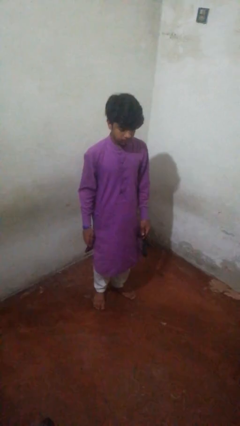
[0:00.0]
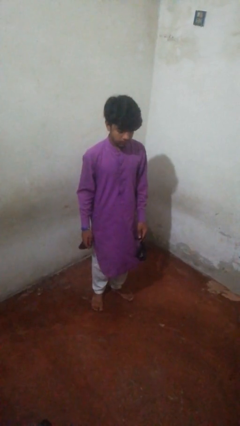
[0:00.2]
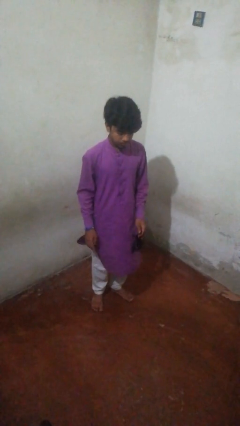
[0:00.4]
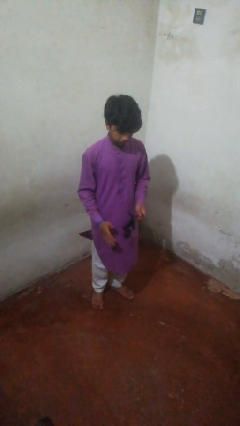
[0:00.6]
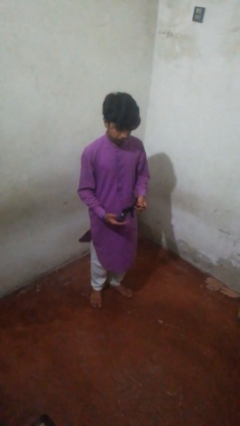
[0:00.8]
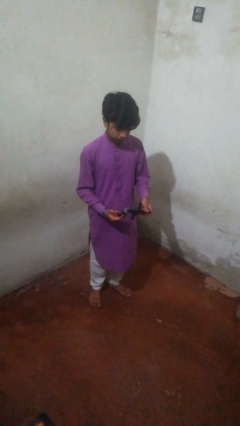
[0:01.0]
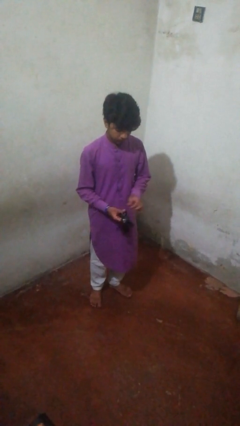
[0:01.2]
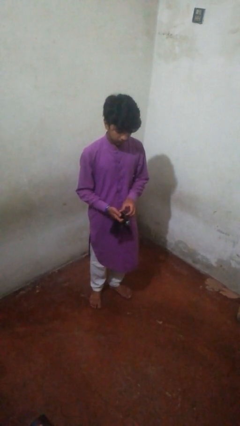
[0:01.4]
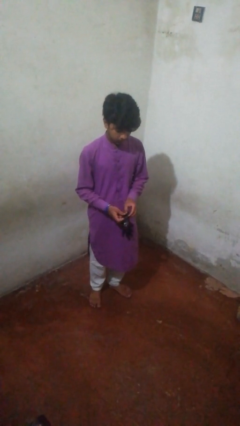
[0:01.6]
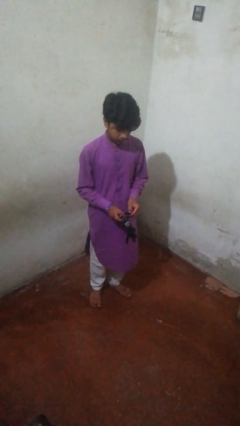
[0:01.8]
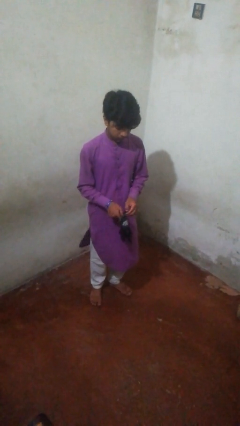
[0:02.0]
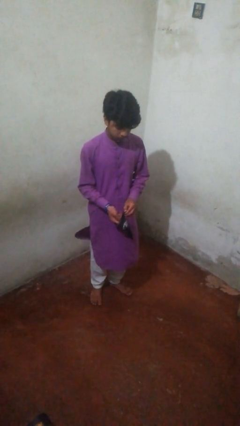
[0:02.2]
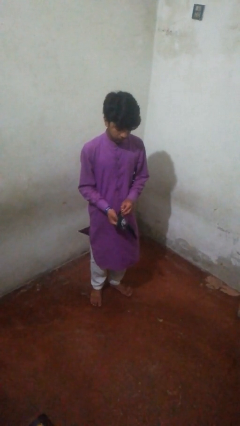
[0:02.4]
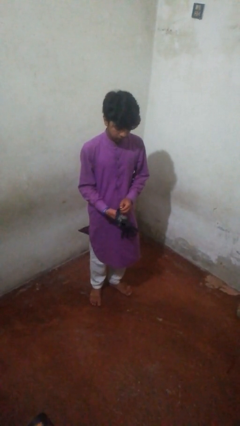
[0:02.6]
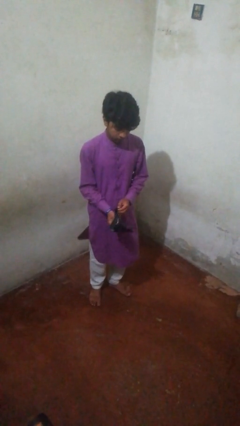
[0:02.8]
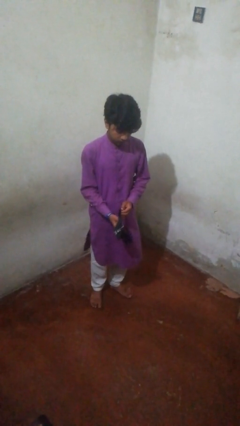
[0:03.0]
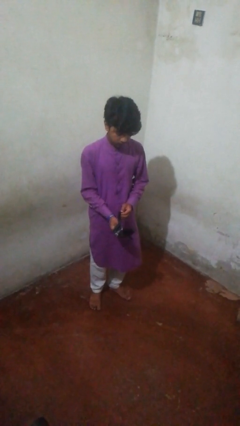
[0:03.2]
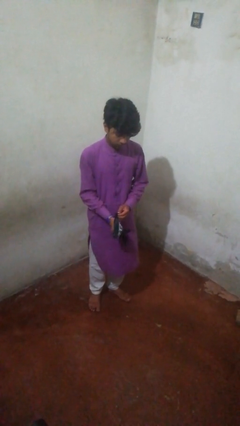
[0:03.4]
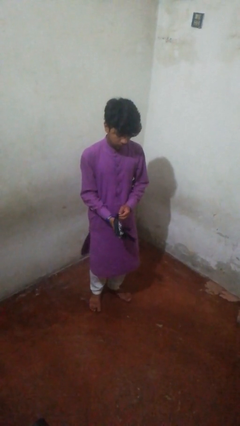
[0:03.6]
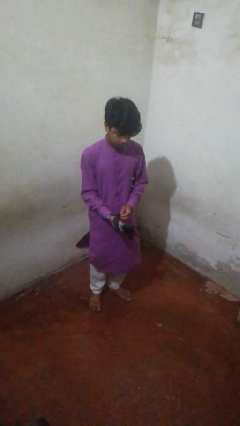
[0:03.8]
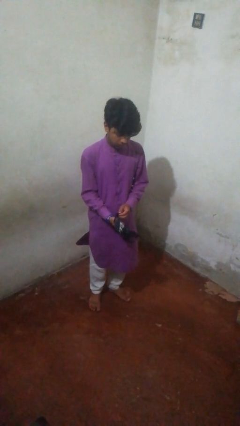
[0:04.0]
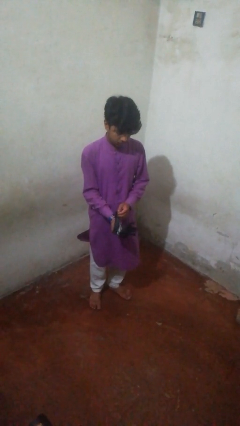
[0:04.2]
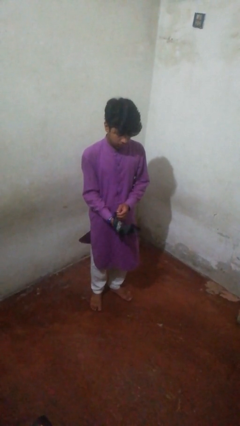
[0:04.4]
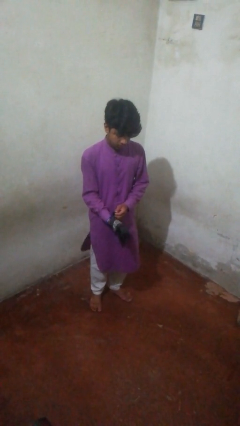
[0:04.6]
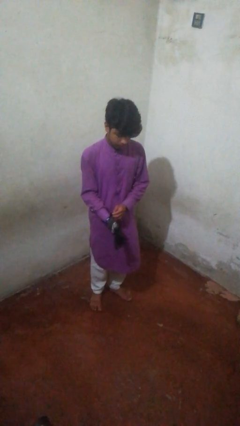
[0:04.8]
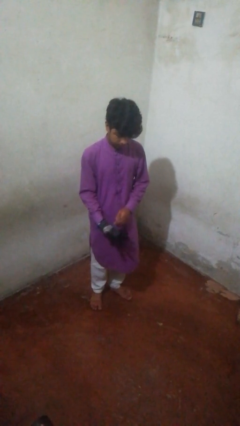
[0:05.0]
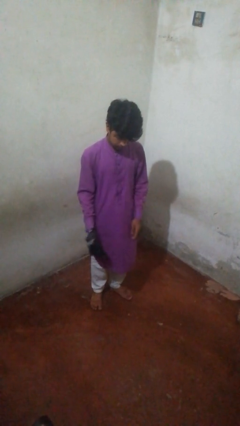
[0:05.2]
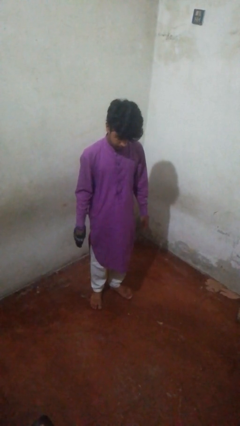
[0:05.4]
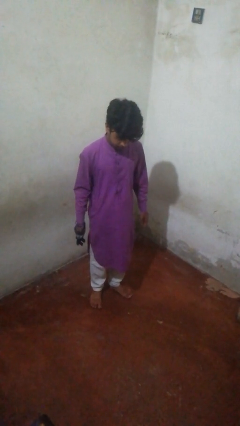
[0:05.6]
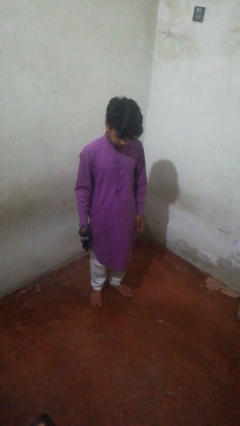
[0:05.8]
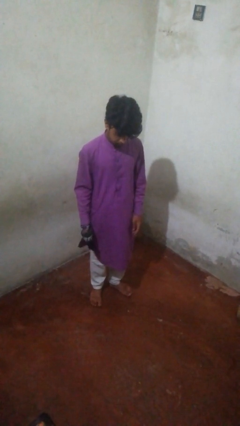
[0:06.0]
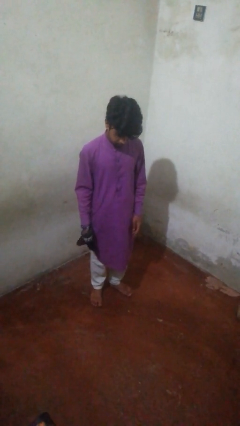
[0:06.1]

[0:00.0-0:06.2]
person puts on gloves

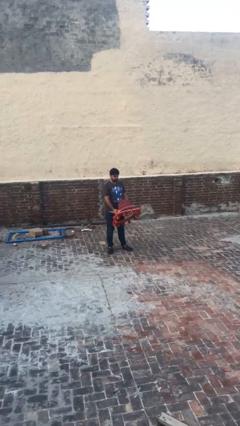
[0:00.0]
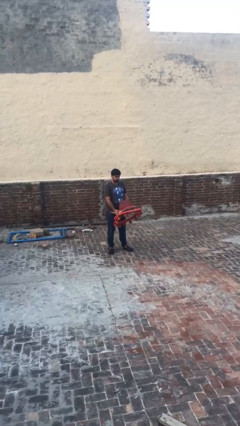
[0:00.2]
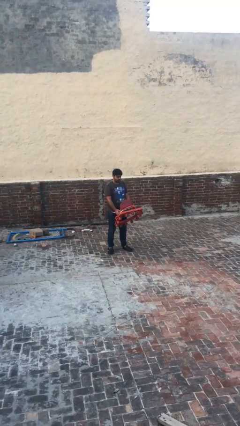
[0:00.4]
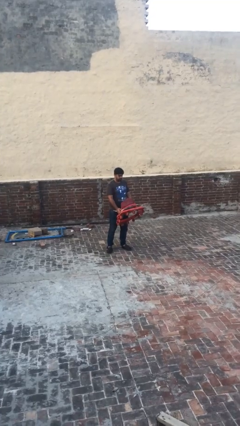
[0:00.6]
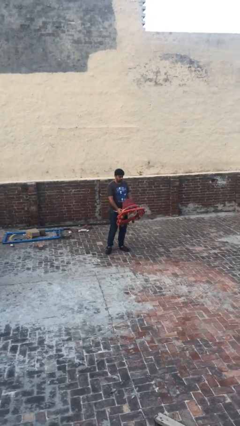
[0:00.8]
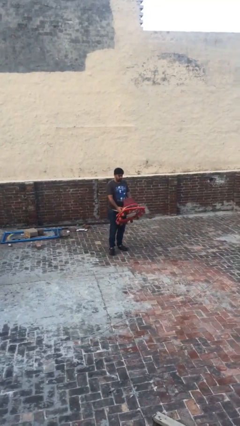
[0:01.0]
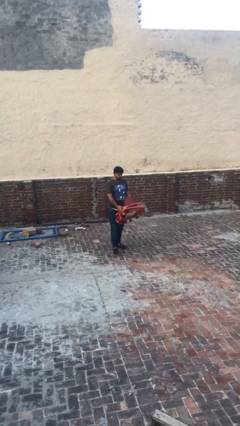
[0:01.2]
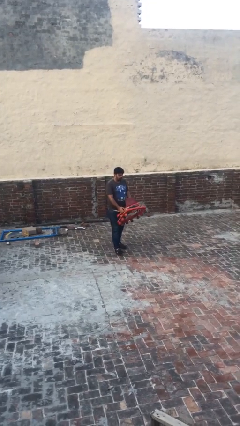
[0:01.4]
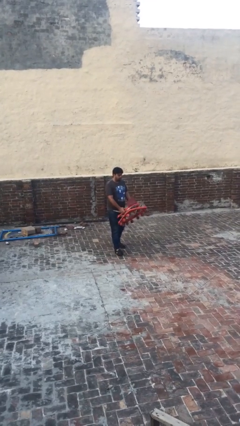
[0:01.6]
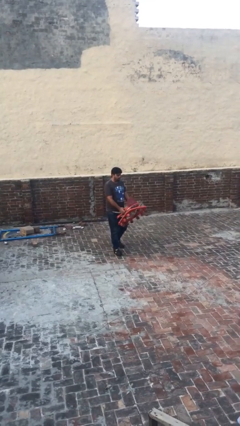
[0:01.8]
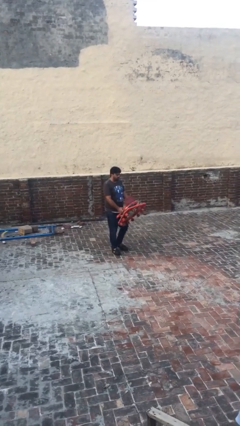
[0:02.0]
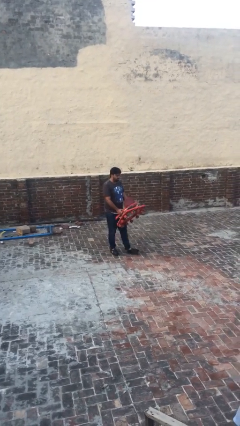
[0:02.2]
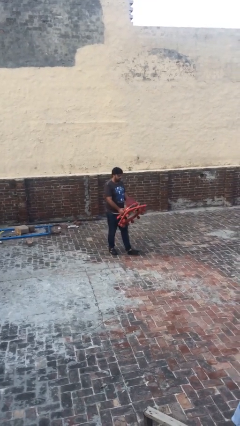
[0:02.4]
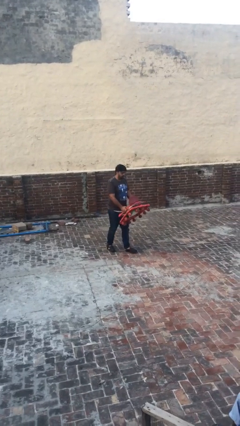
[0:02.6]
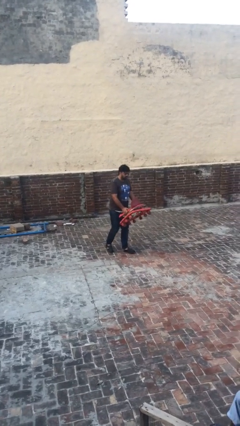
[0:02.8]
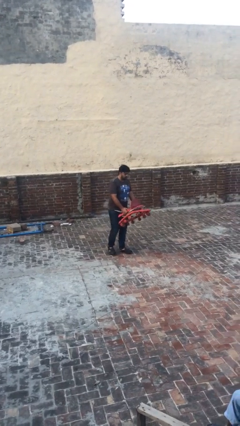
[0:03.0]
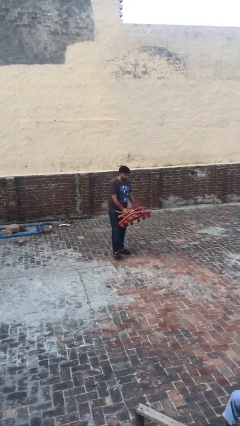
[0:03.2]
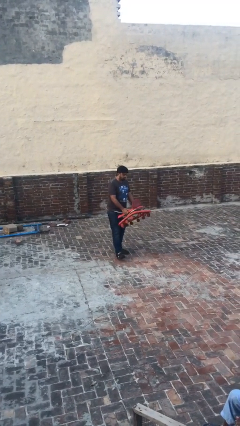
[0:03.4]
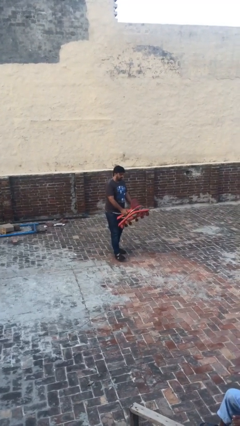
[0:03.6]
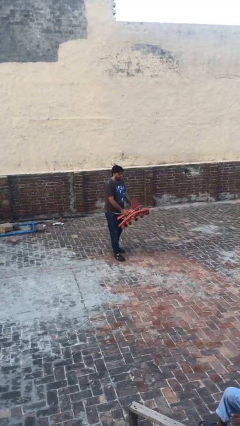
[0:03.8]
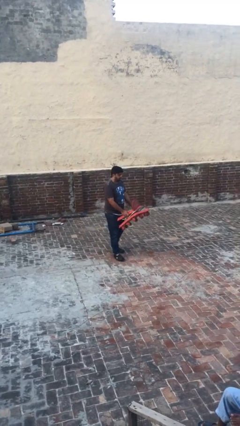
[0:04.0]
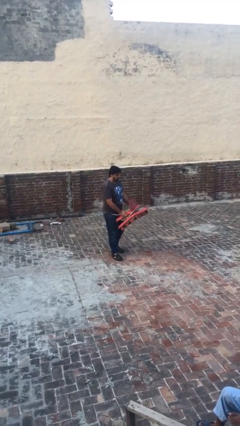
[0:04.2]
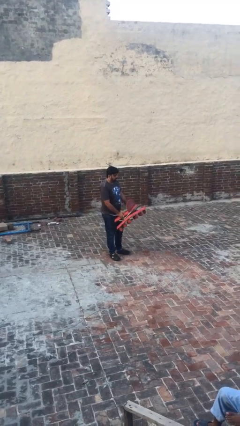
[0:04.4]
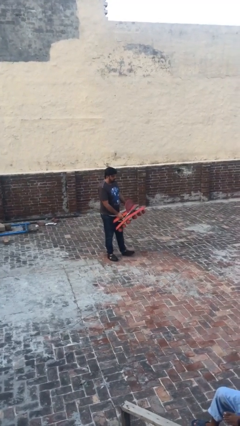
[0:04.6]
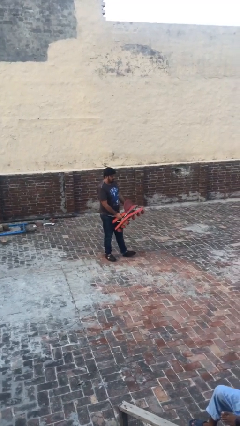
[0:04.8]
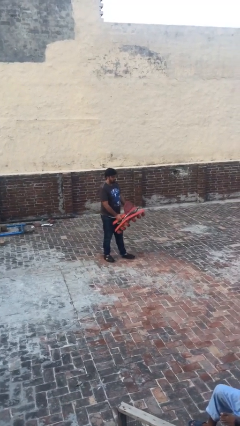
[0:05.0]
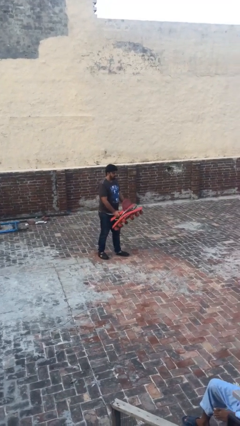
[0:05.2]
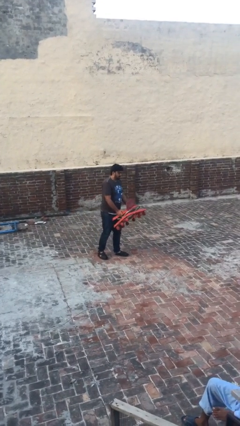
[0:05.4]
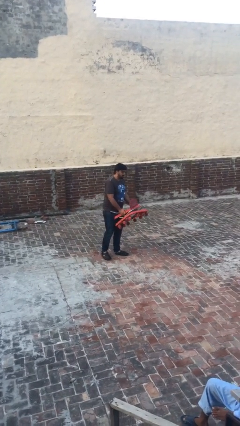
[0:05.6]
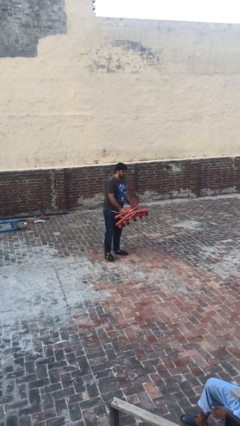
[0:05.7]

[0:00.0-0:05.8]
person carries heavy object

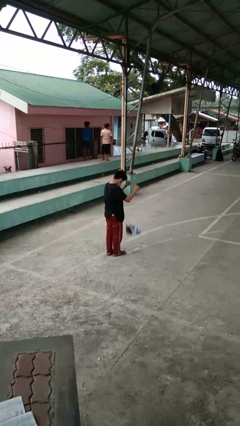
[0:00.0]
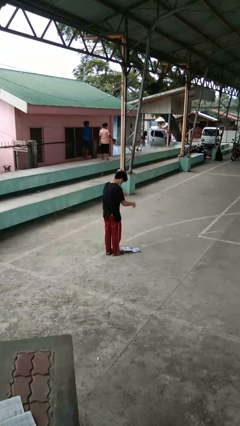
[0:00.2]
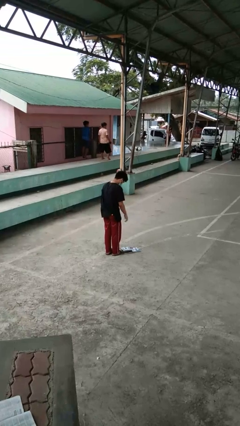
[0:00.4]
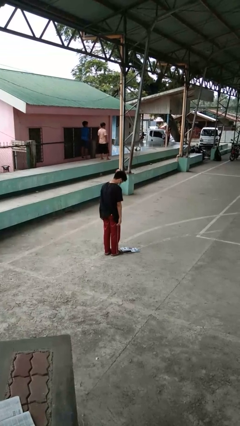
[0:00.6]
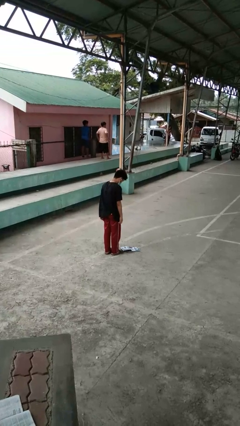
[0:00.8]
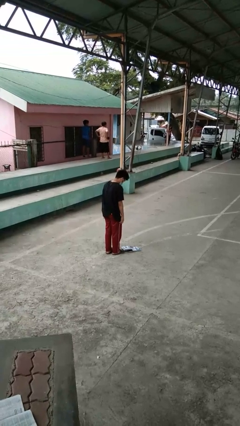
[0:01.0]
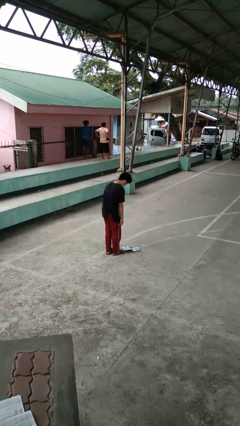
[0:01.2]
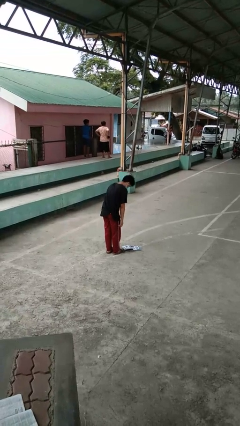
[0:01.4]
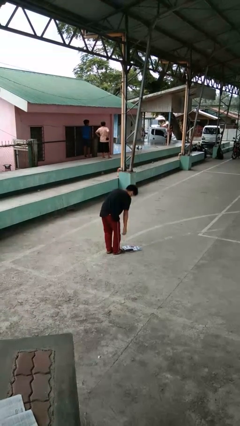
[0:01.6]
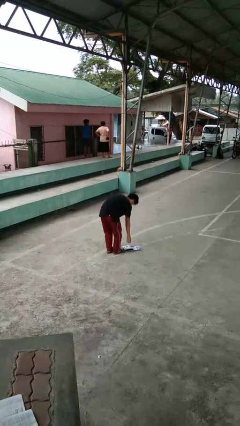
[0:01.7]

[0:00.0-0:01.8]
person drops object

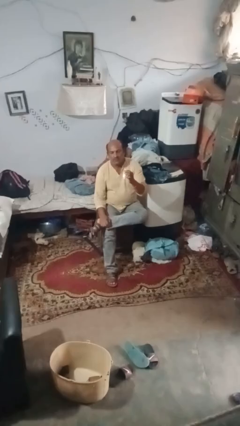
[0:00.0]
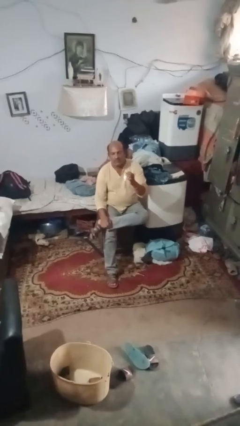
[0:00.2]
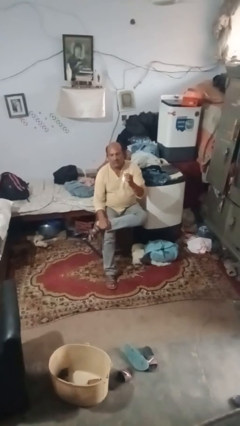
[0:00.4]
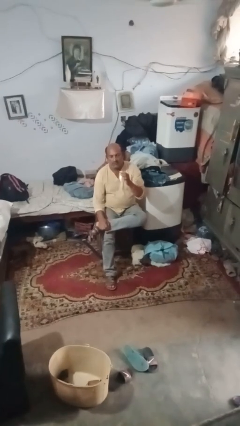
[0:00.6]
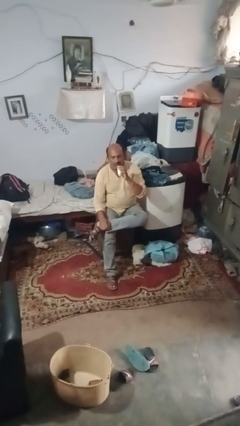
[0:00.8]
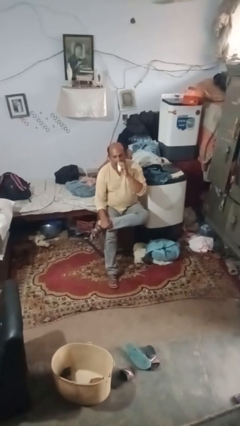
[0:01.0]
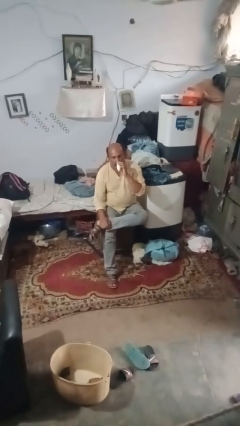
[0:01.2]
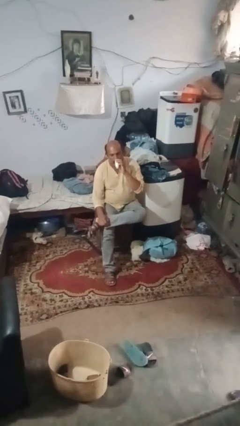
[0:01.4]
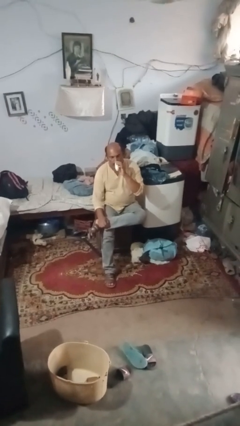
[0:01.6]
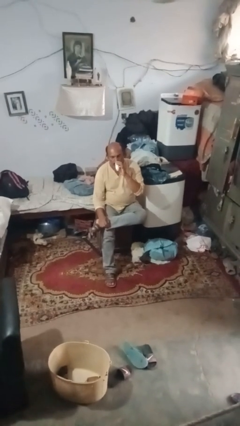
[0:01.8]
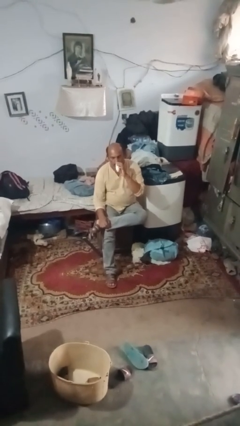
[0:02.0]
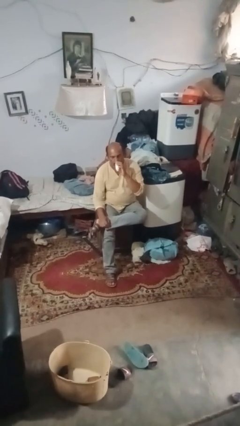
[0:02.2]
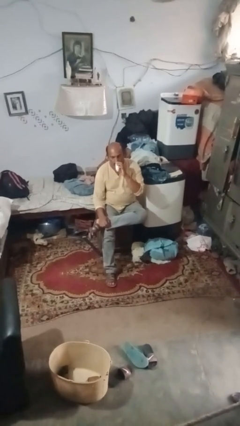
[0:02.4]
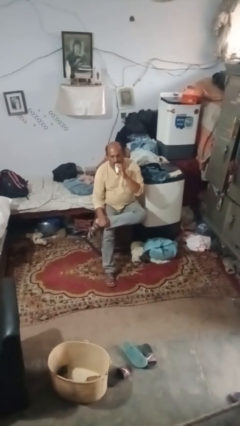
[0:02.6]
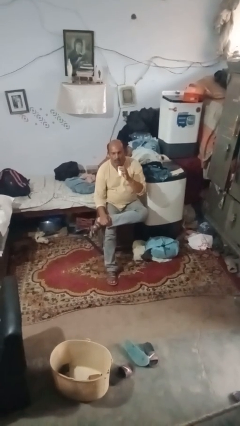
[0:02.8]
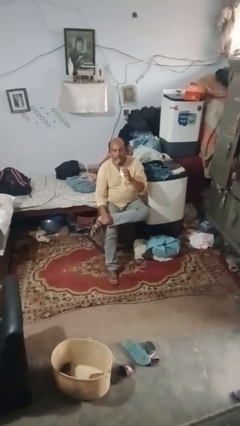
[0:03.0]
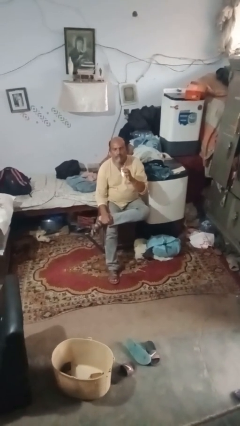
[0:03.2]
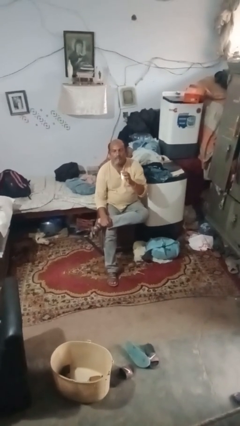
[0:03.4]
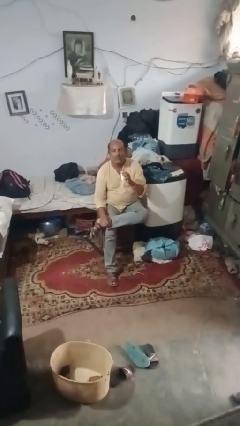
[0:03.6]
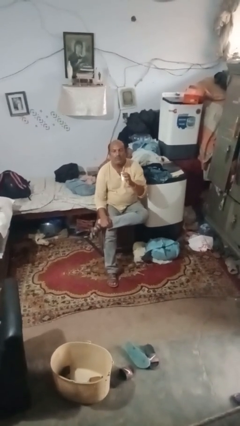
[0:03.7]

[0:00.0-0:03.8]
person vapes
